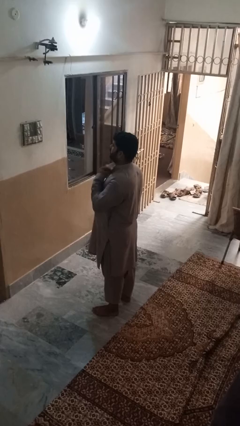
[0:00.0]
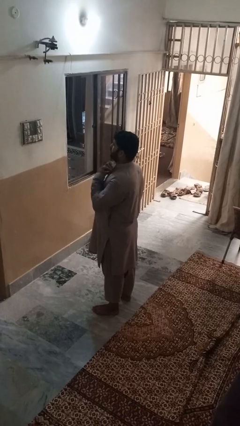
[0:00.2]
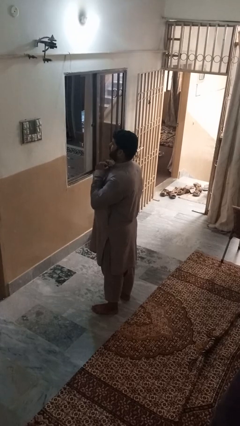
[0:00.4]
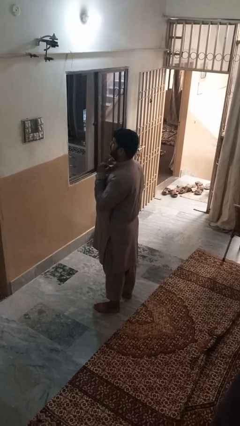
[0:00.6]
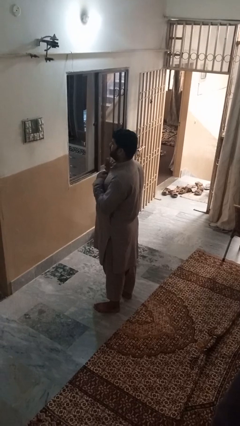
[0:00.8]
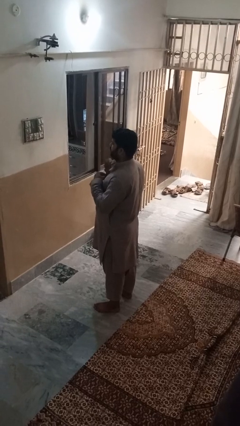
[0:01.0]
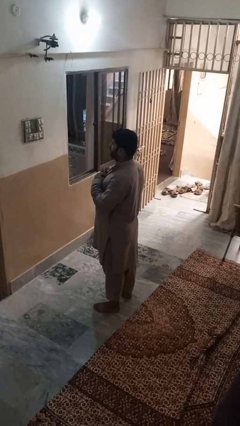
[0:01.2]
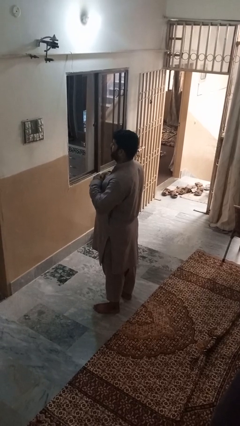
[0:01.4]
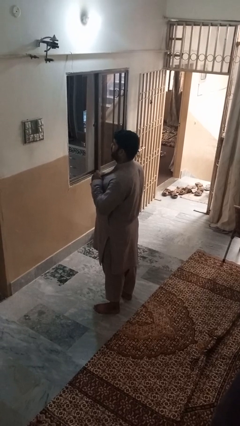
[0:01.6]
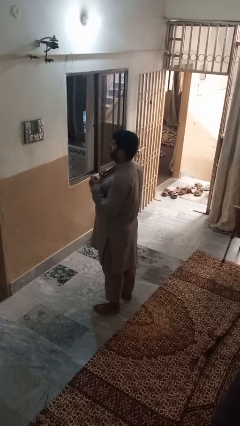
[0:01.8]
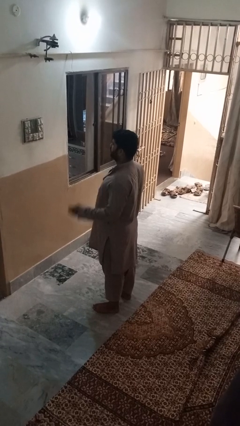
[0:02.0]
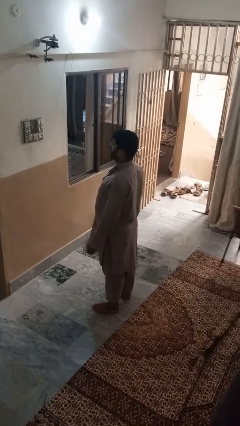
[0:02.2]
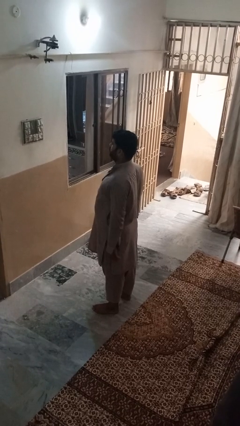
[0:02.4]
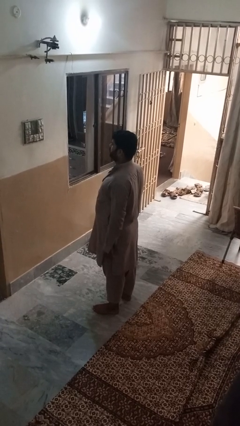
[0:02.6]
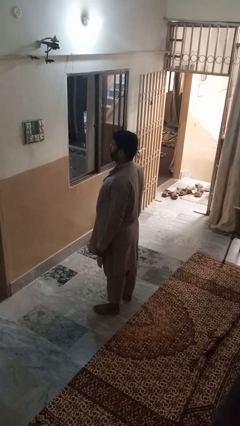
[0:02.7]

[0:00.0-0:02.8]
person unbuttons shirt

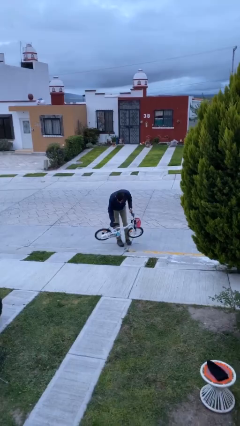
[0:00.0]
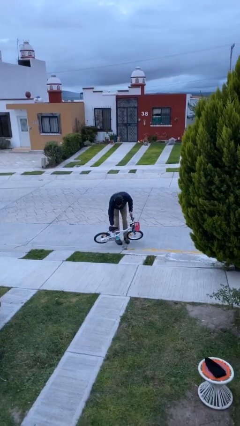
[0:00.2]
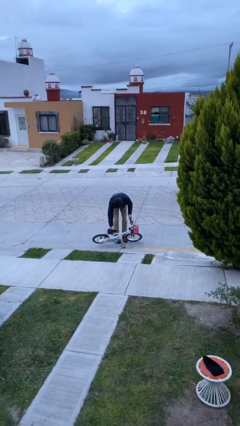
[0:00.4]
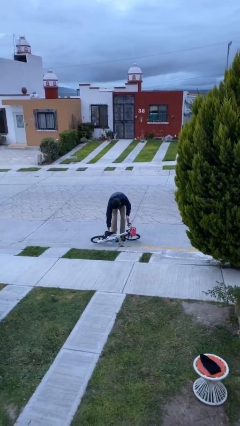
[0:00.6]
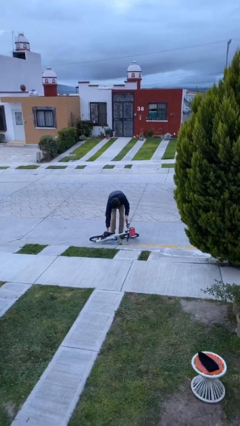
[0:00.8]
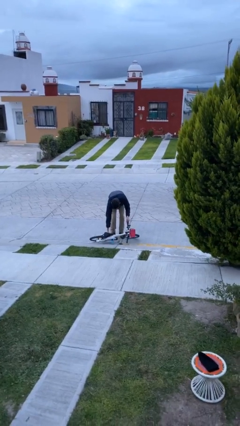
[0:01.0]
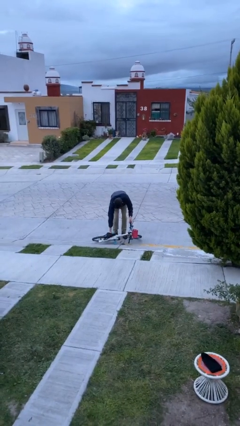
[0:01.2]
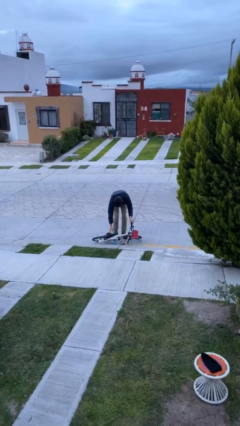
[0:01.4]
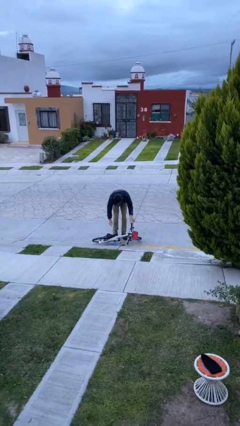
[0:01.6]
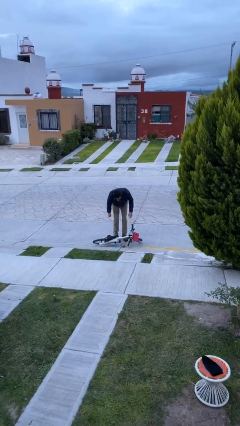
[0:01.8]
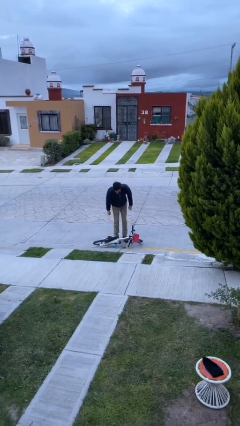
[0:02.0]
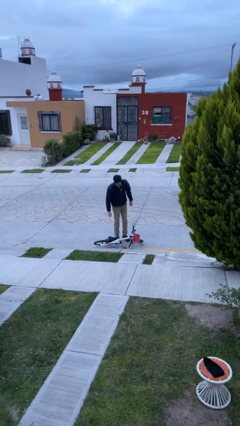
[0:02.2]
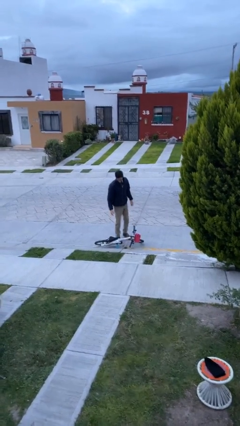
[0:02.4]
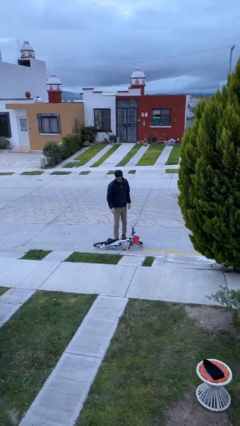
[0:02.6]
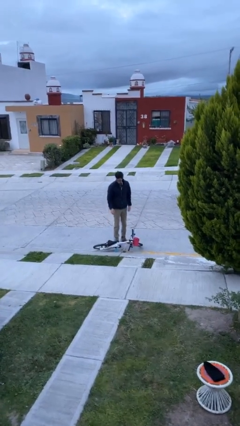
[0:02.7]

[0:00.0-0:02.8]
person puts down object on floor

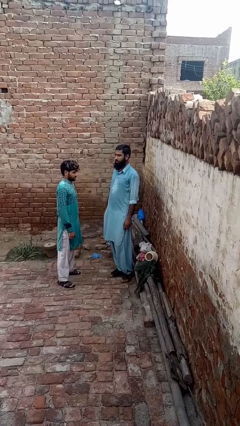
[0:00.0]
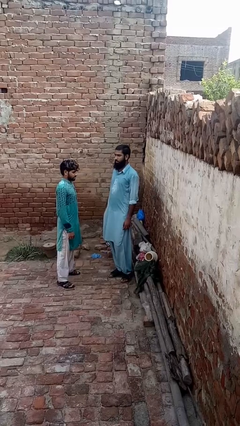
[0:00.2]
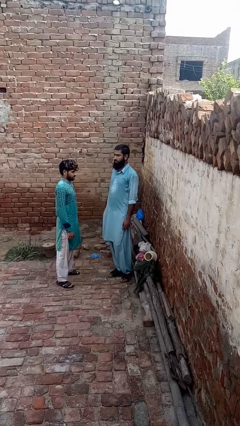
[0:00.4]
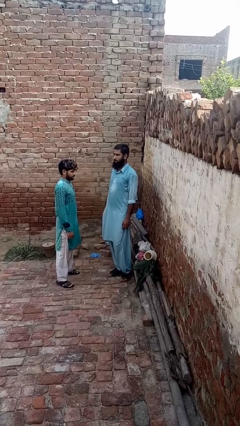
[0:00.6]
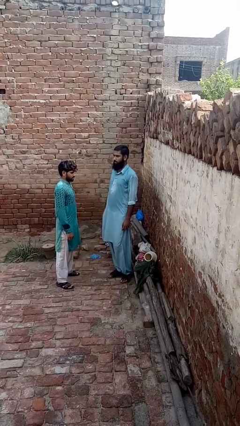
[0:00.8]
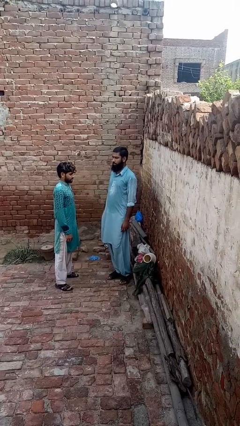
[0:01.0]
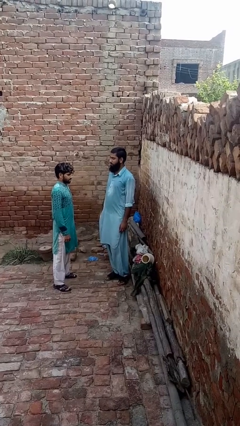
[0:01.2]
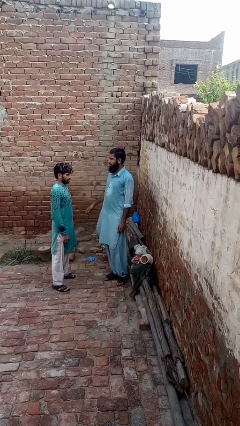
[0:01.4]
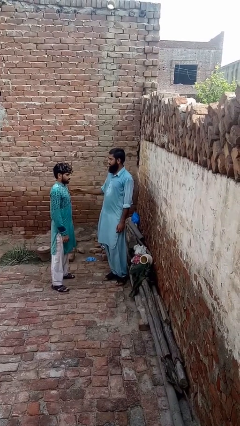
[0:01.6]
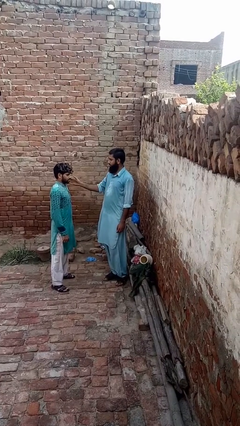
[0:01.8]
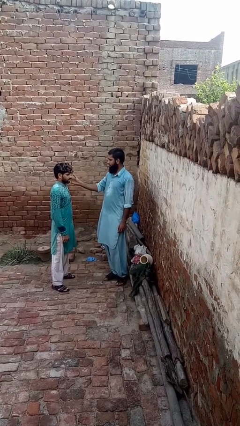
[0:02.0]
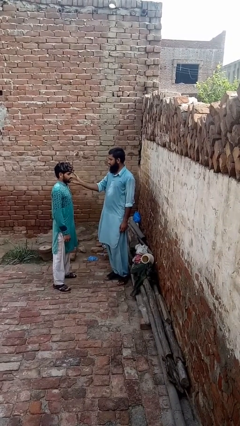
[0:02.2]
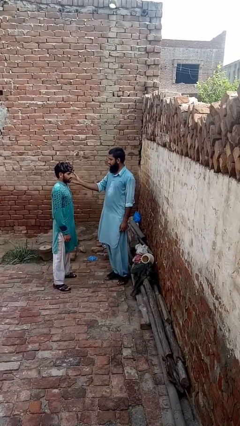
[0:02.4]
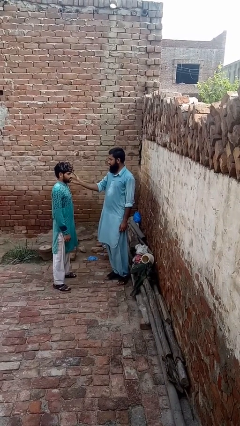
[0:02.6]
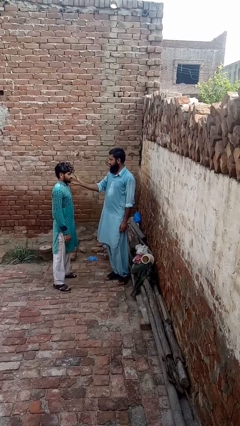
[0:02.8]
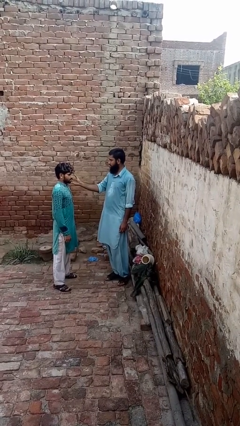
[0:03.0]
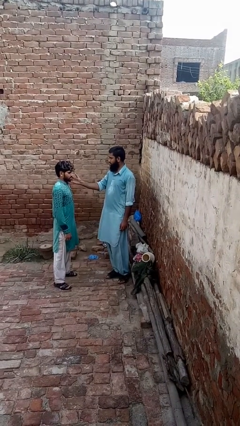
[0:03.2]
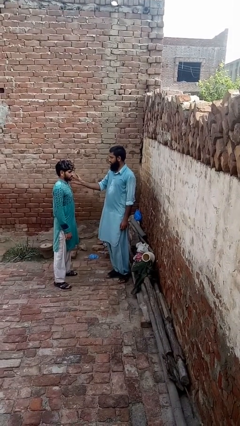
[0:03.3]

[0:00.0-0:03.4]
person touches face of person

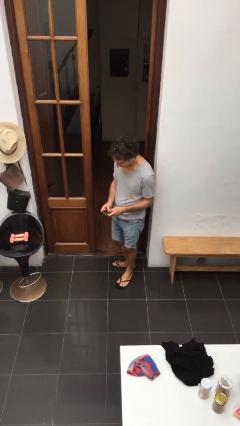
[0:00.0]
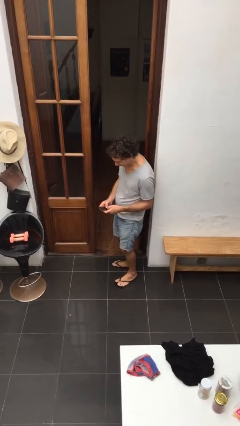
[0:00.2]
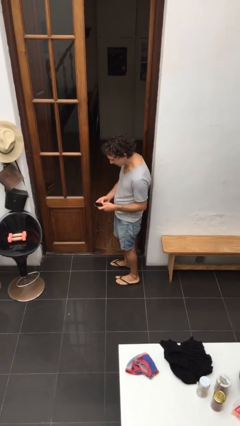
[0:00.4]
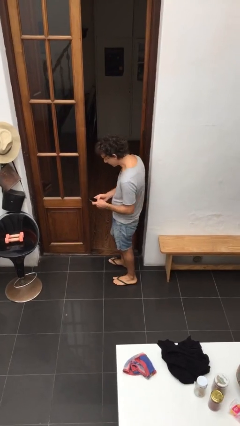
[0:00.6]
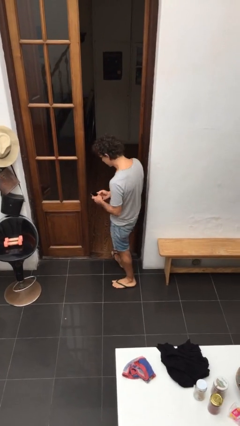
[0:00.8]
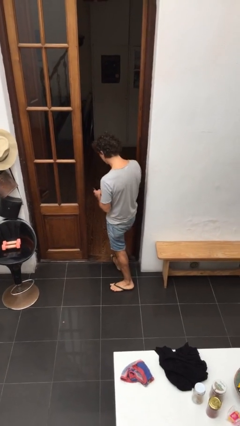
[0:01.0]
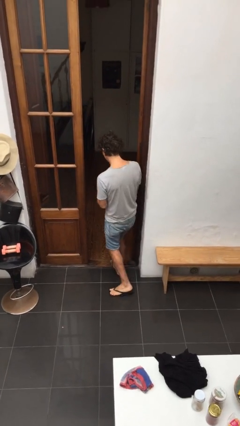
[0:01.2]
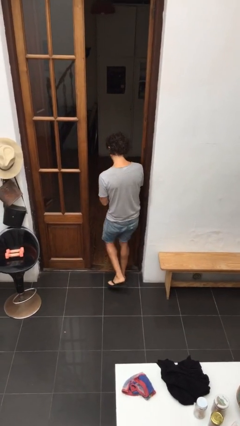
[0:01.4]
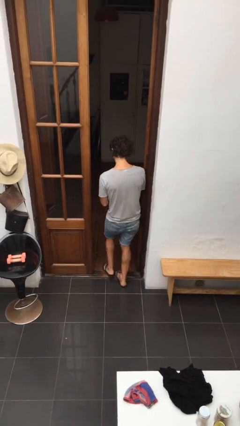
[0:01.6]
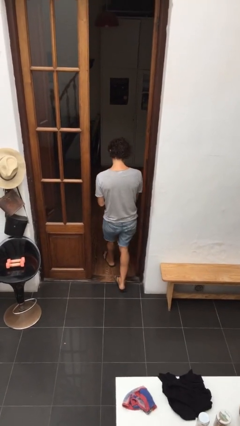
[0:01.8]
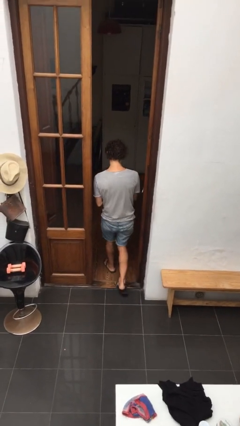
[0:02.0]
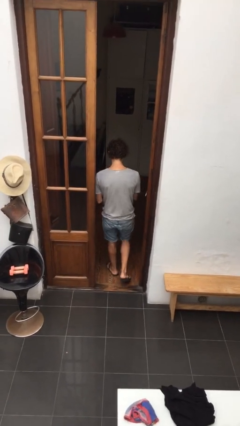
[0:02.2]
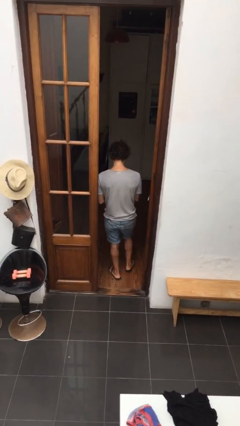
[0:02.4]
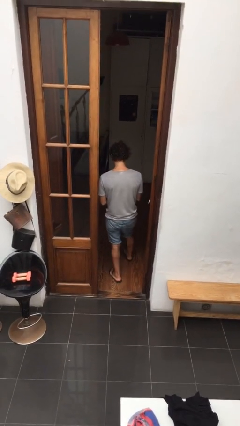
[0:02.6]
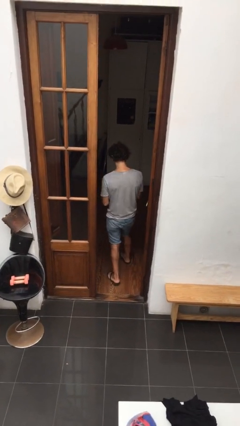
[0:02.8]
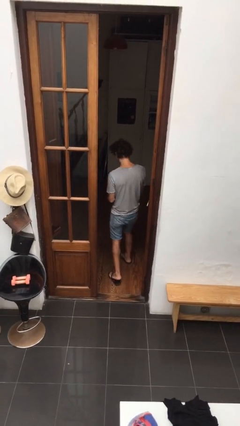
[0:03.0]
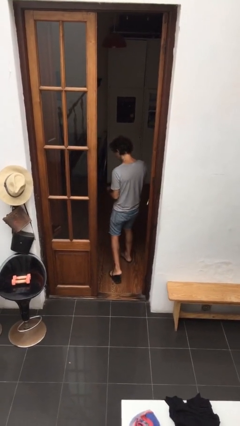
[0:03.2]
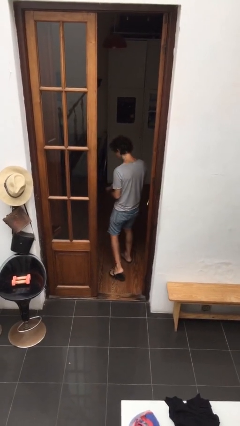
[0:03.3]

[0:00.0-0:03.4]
person exits scene through structure

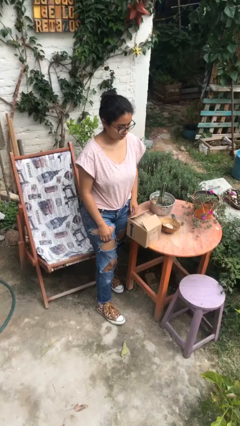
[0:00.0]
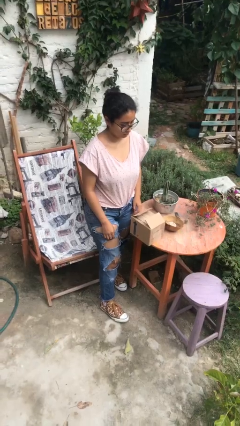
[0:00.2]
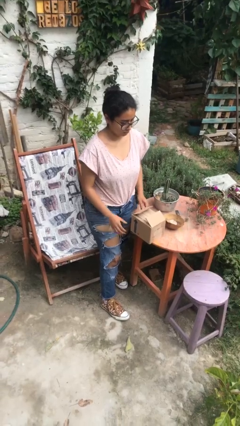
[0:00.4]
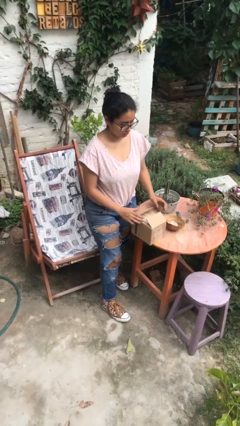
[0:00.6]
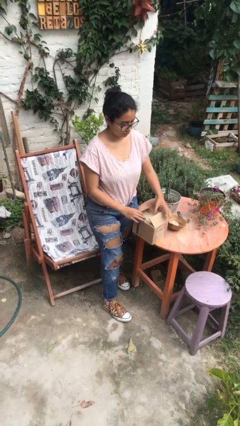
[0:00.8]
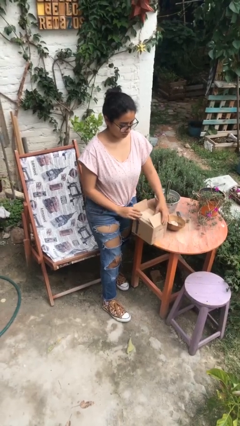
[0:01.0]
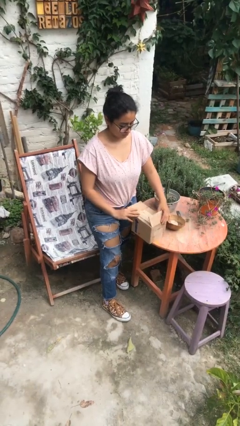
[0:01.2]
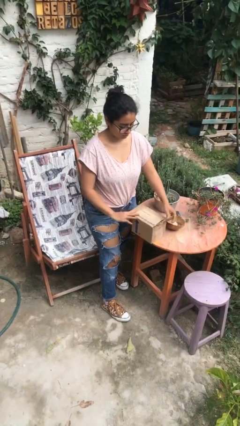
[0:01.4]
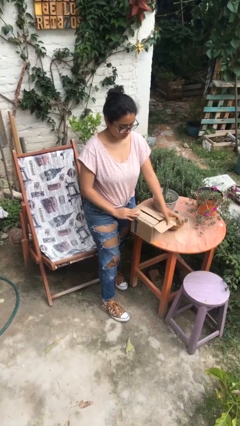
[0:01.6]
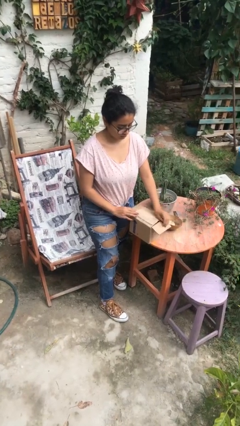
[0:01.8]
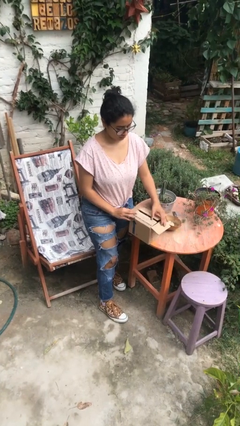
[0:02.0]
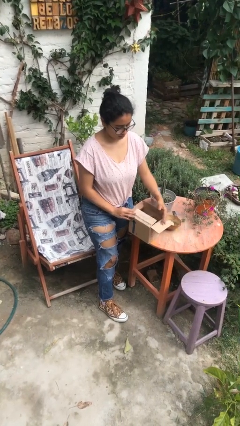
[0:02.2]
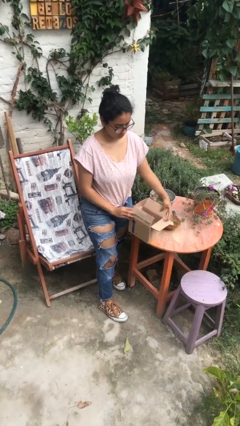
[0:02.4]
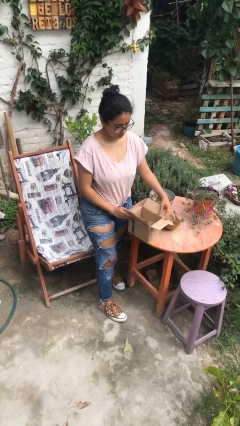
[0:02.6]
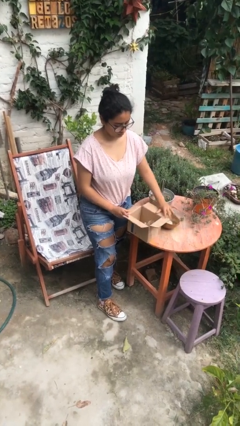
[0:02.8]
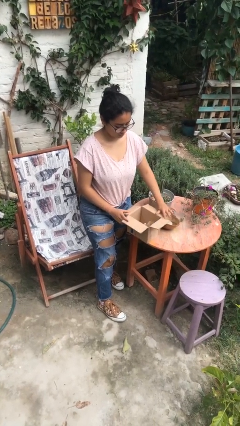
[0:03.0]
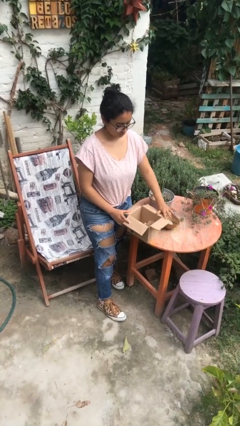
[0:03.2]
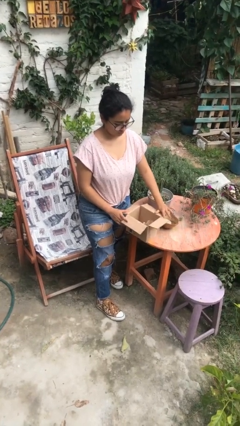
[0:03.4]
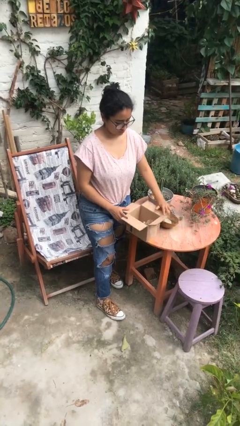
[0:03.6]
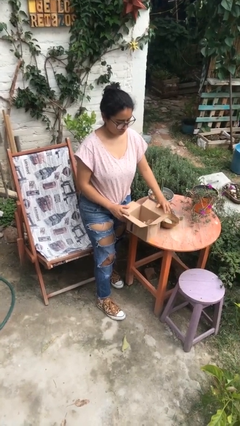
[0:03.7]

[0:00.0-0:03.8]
person opens box

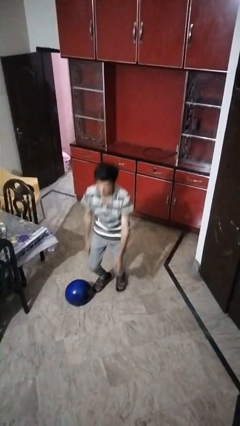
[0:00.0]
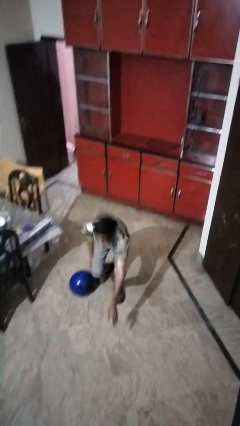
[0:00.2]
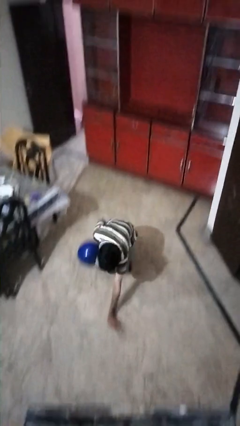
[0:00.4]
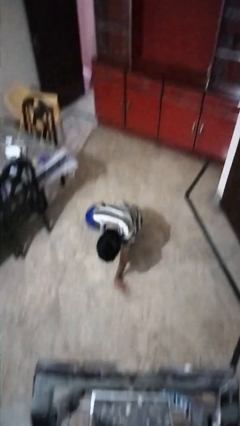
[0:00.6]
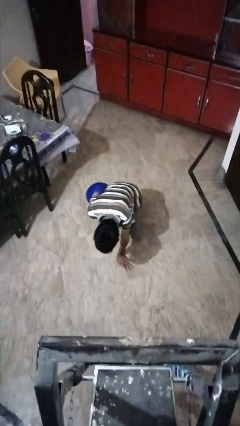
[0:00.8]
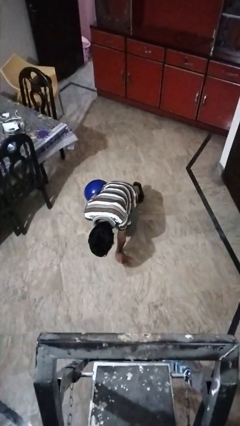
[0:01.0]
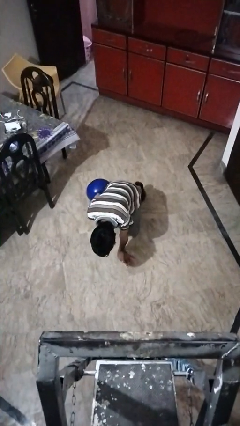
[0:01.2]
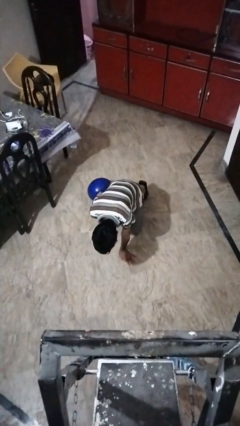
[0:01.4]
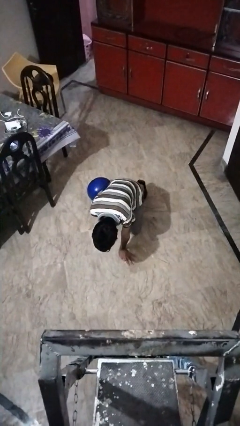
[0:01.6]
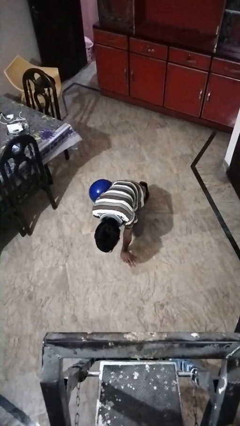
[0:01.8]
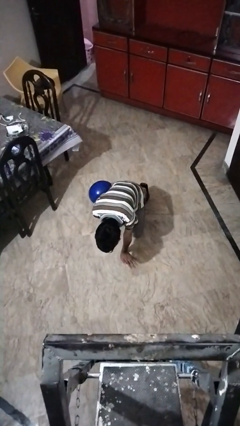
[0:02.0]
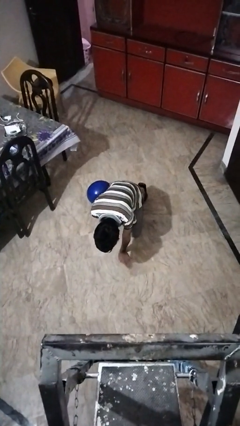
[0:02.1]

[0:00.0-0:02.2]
person trips on object on floor
